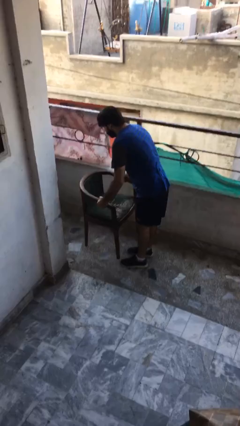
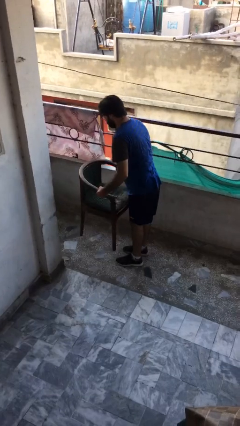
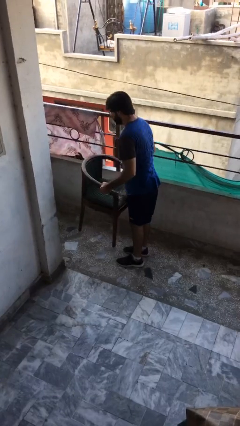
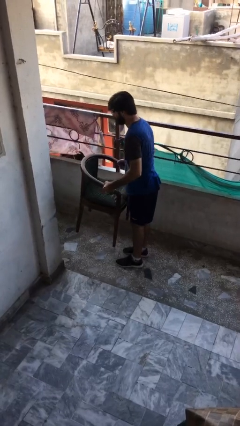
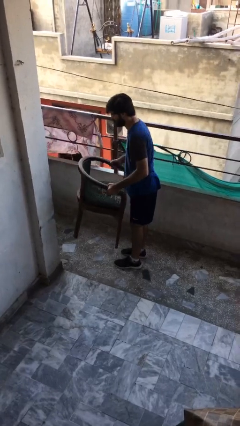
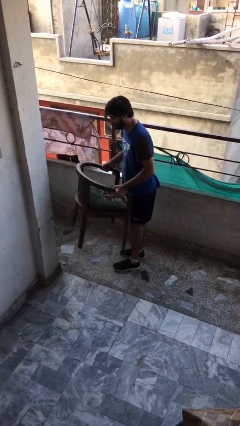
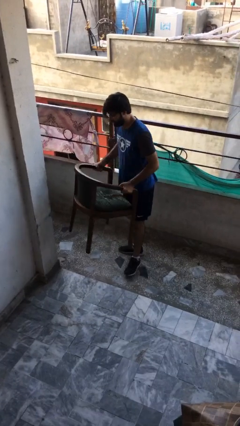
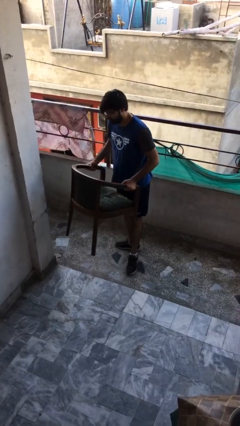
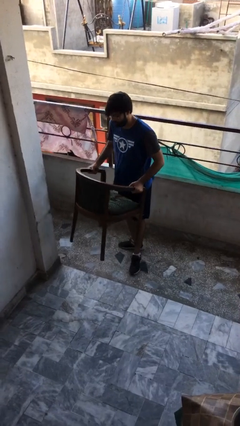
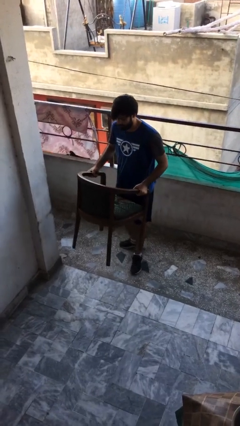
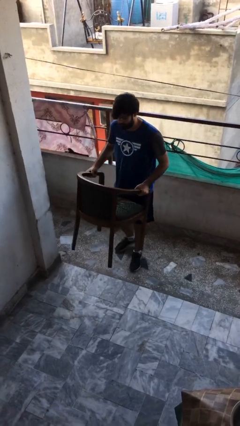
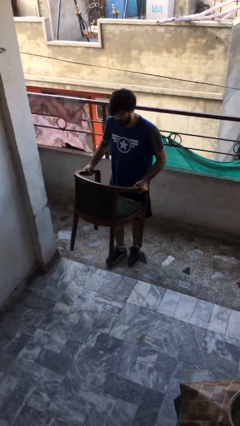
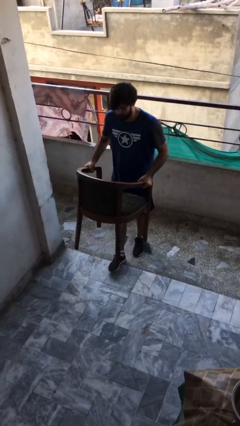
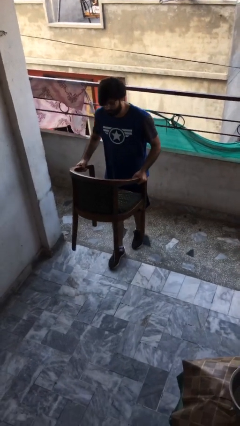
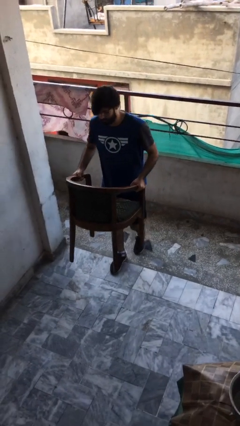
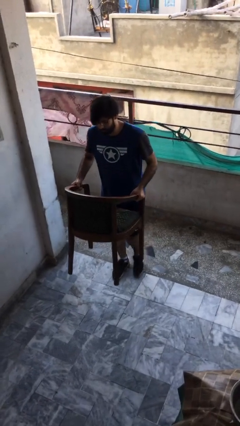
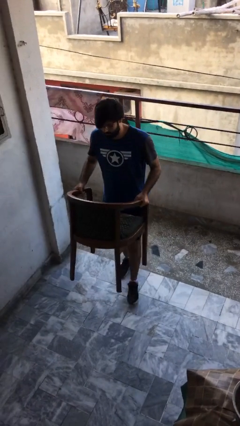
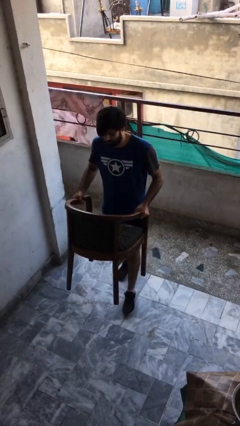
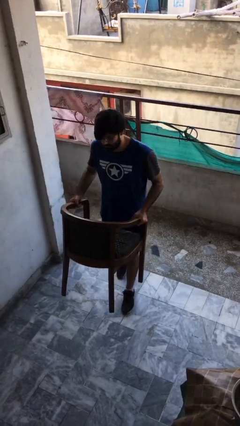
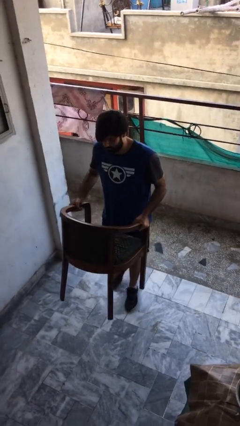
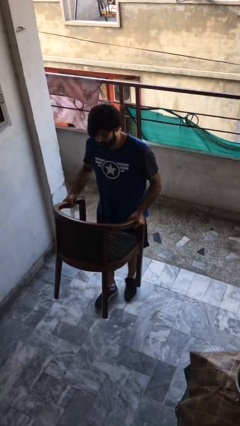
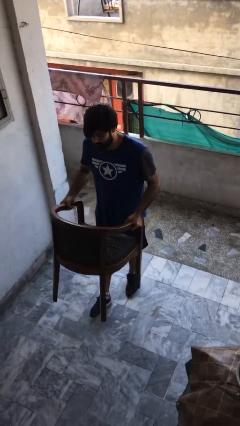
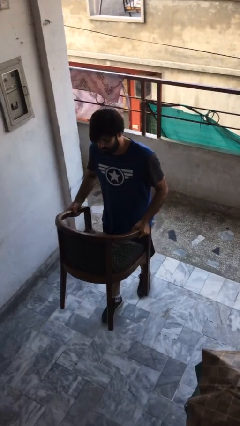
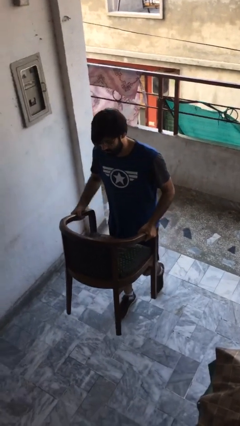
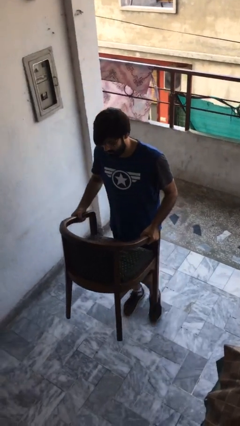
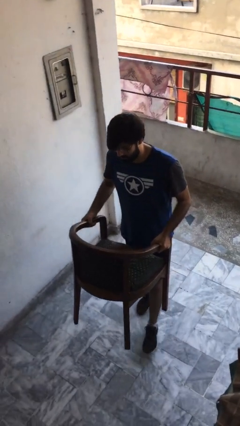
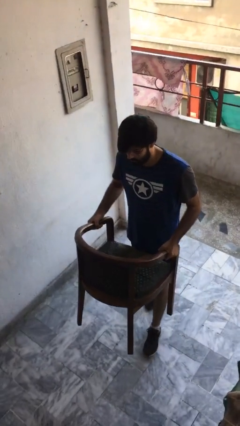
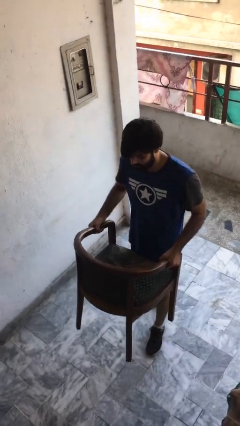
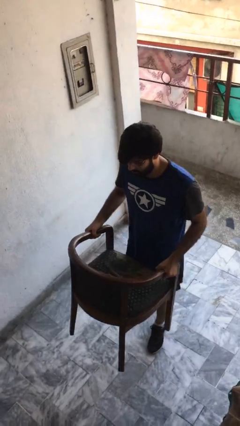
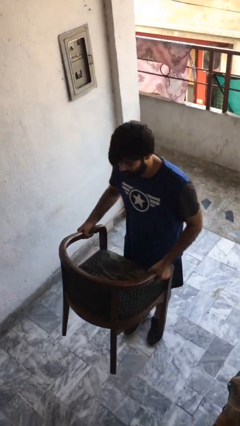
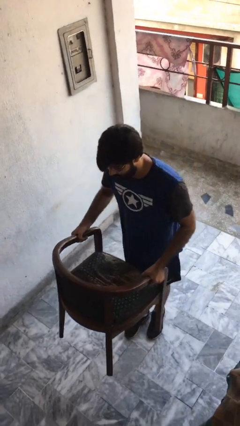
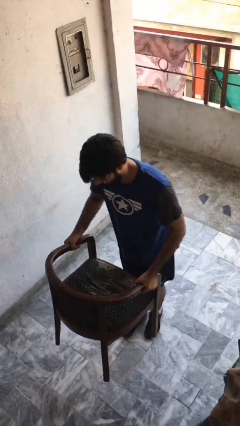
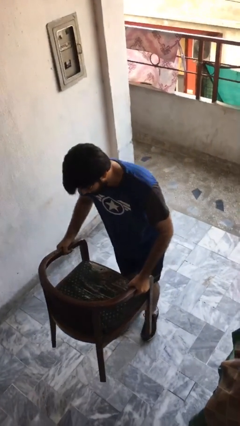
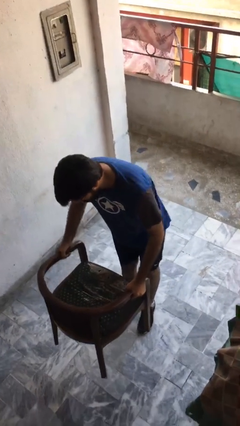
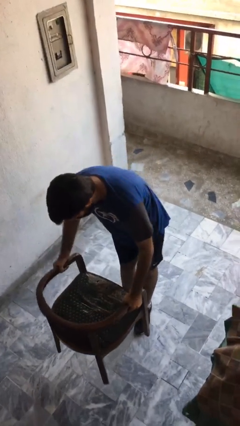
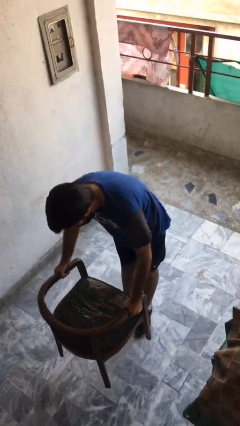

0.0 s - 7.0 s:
person carries heavy object

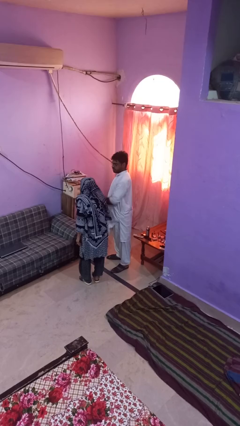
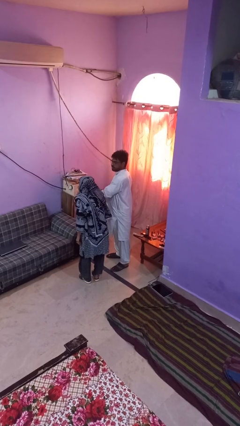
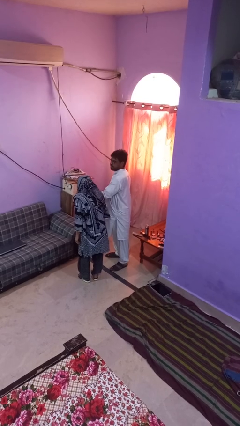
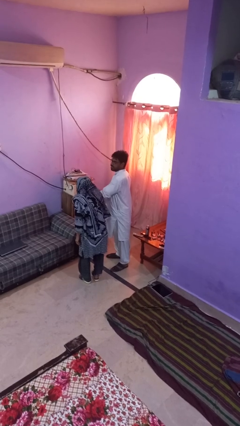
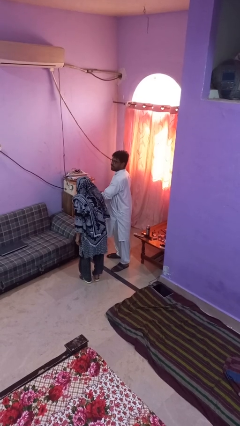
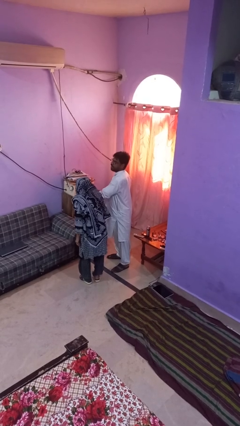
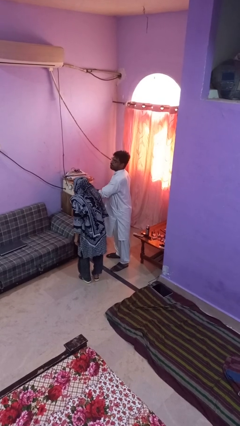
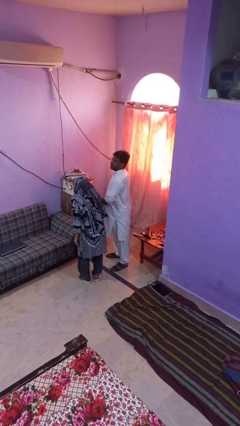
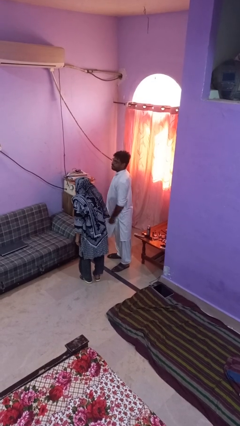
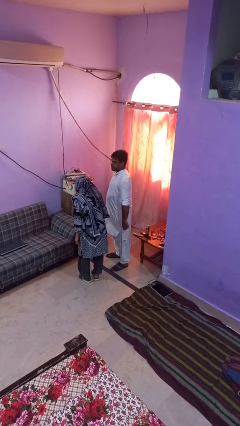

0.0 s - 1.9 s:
person nudges person with elbow

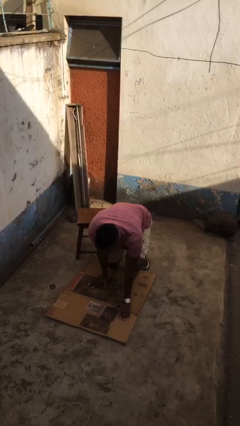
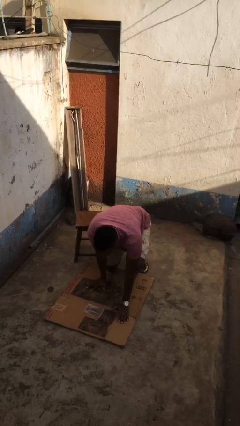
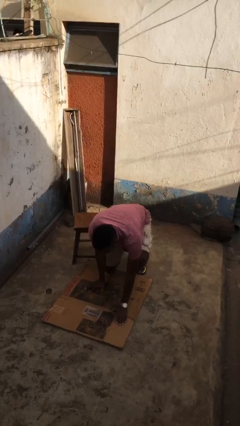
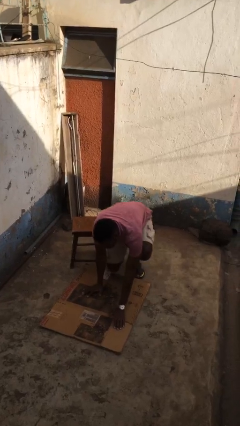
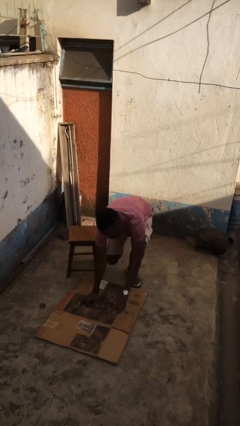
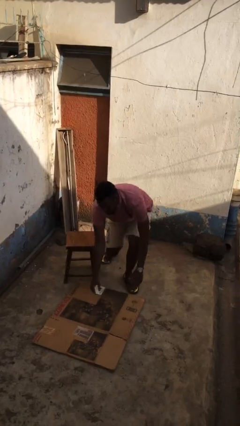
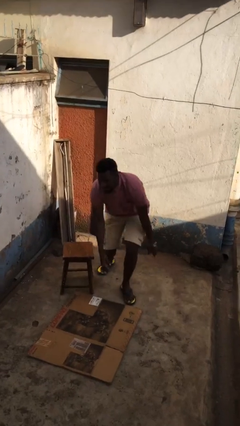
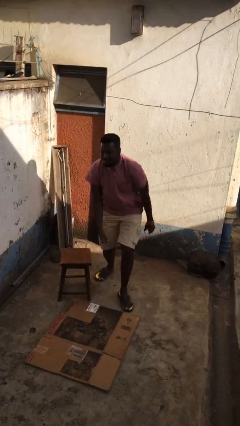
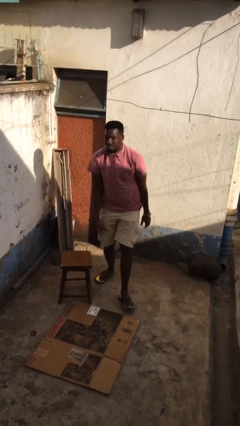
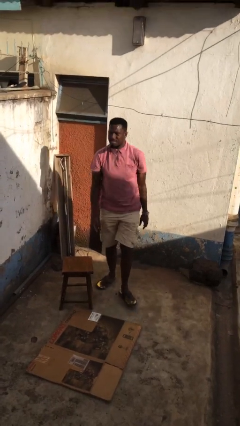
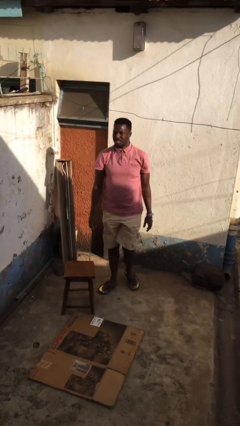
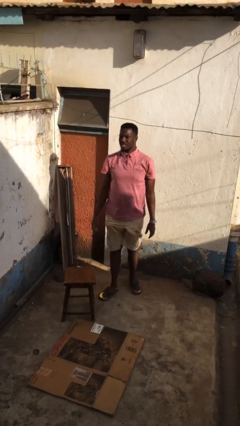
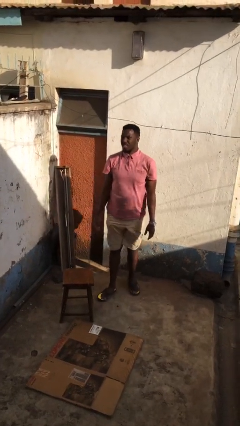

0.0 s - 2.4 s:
person stands up from floor

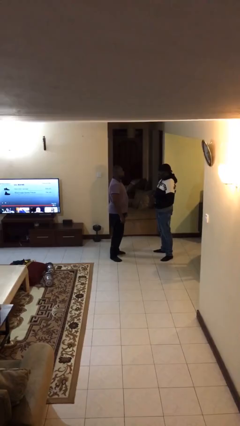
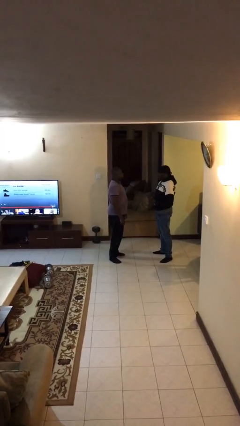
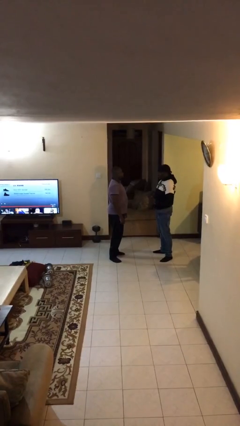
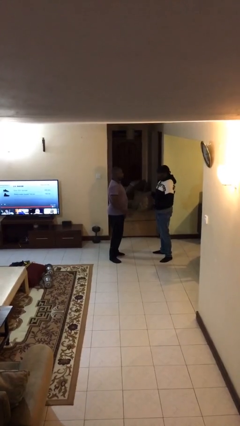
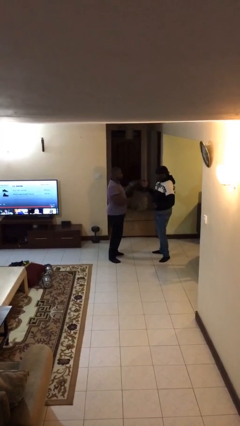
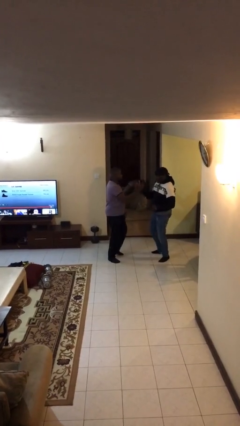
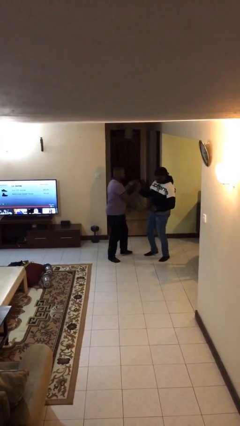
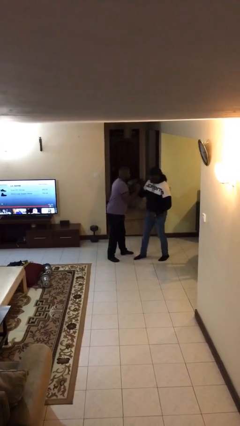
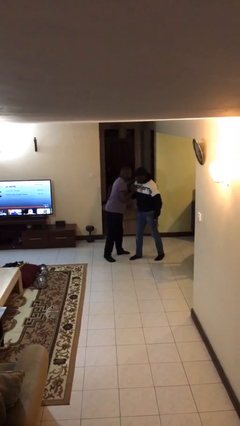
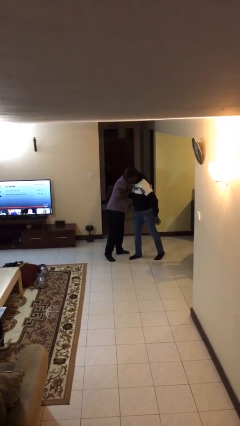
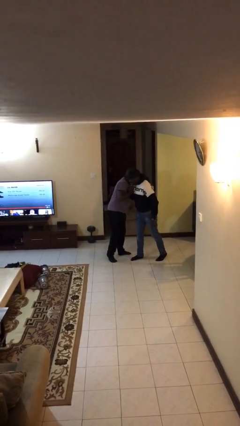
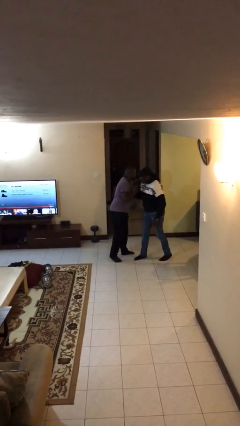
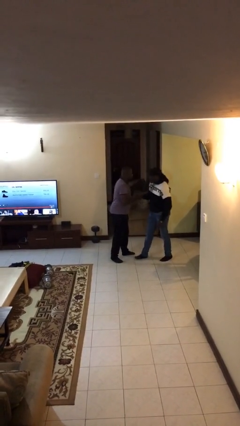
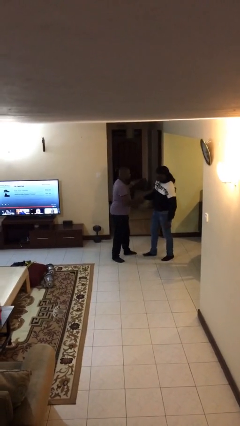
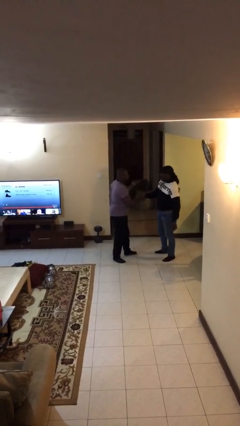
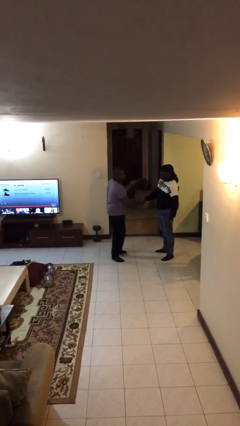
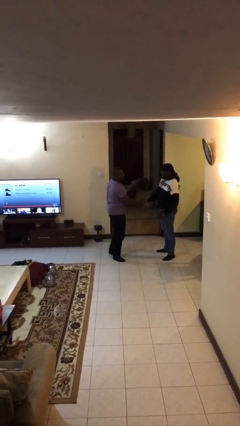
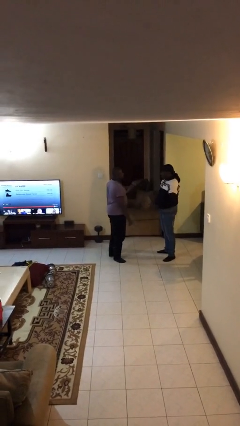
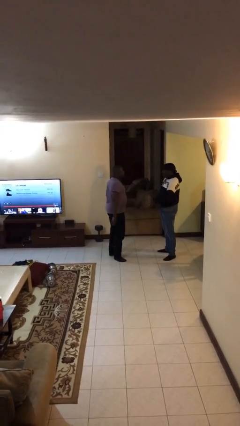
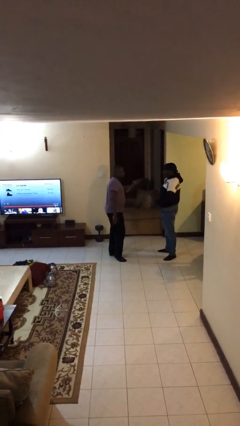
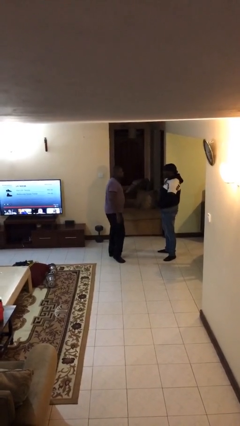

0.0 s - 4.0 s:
person embraces person

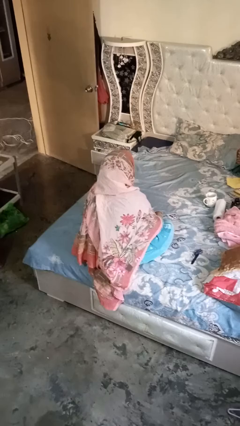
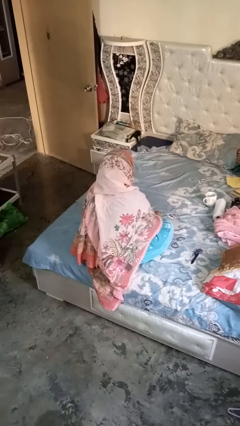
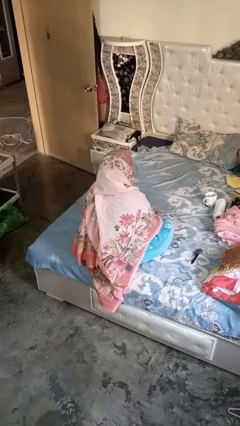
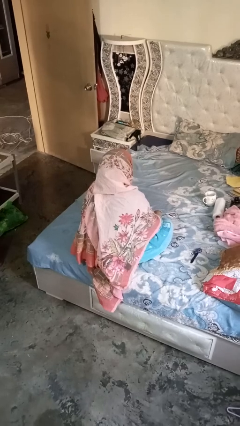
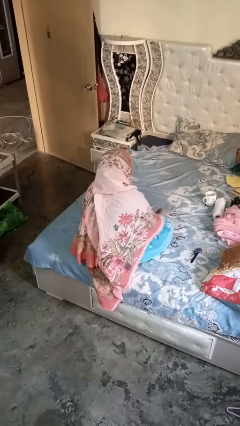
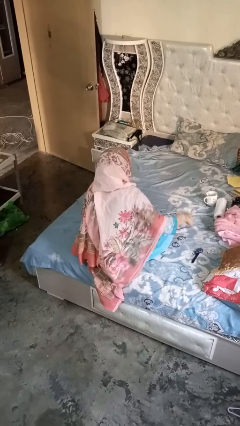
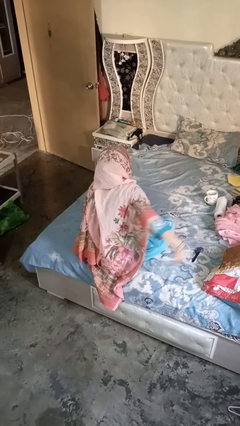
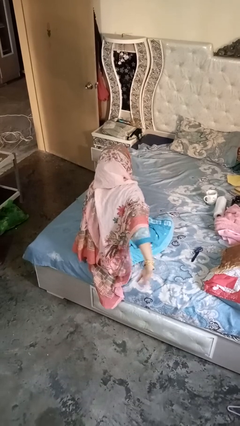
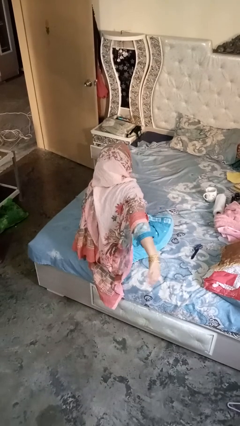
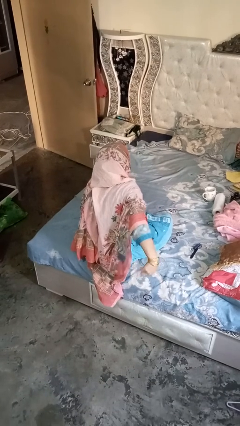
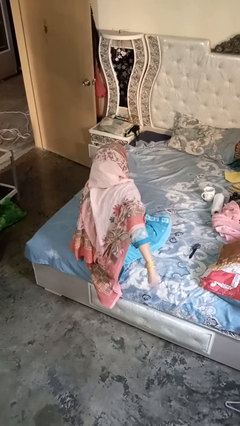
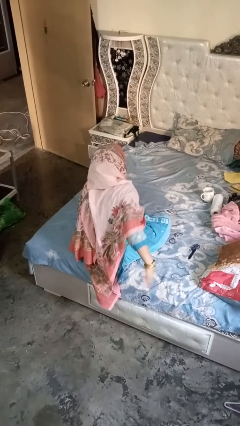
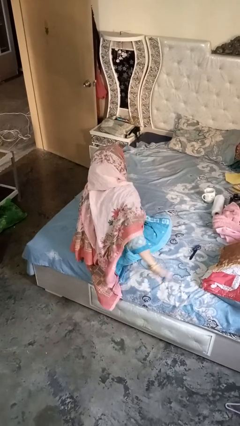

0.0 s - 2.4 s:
person gestures behind me
